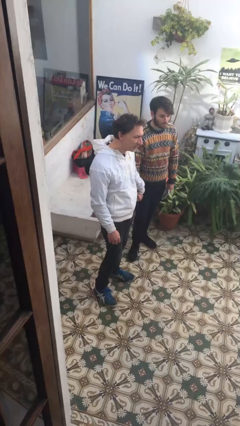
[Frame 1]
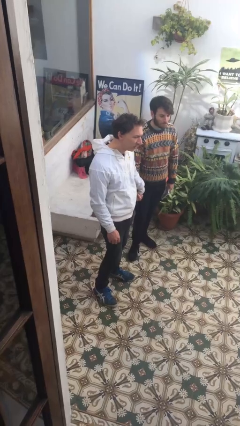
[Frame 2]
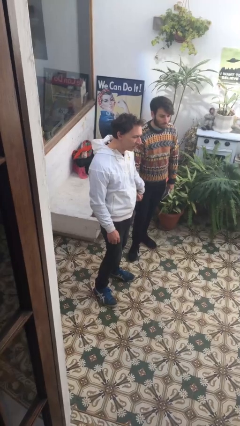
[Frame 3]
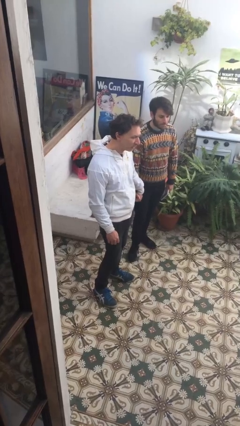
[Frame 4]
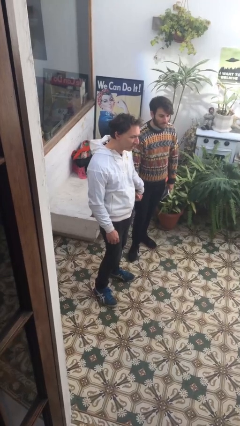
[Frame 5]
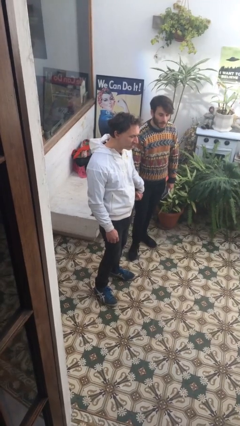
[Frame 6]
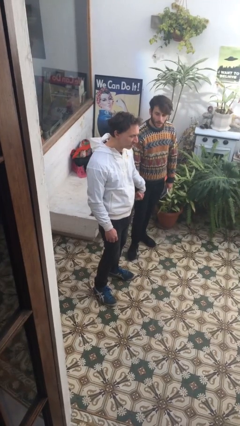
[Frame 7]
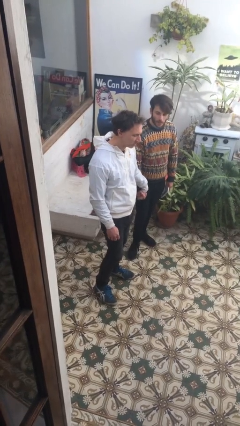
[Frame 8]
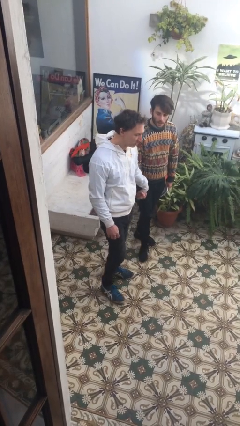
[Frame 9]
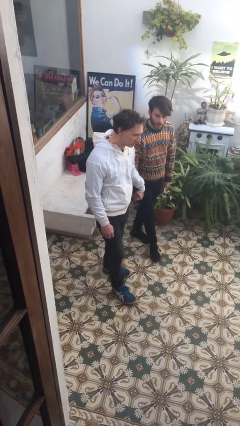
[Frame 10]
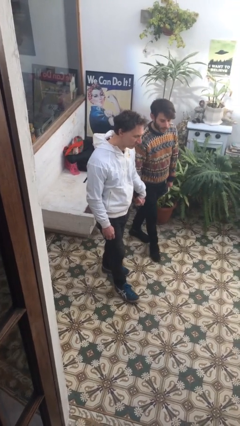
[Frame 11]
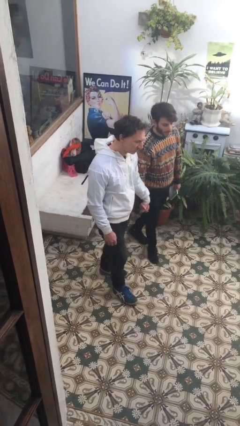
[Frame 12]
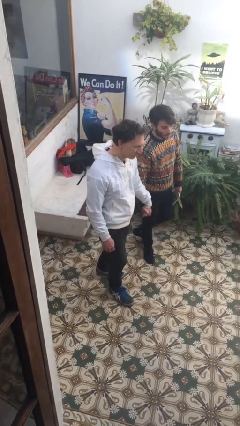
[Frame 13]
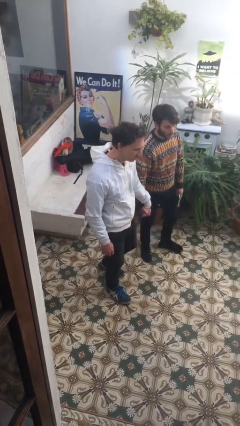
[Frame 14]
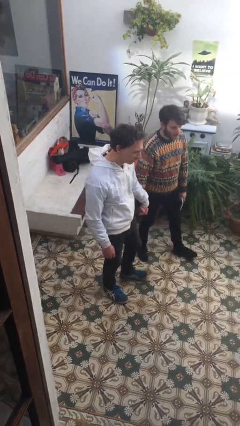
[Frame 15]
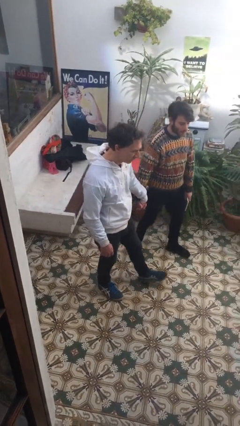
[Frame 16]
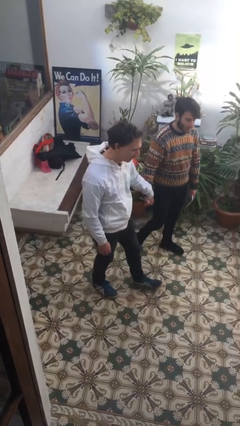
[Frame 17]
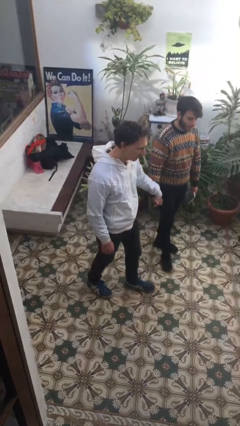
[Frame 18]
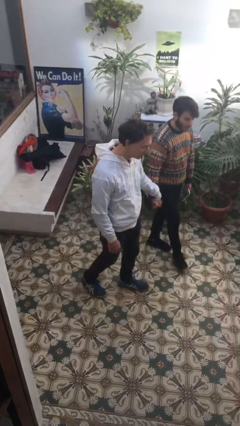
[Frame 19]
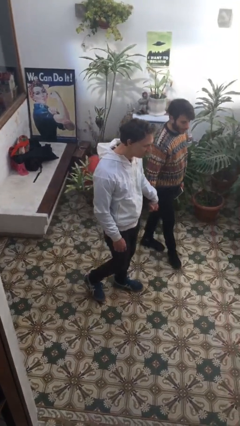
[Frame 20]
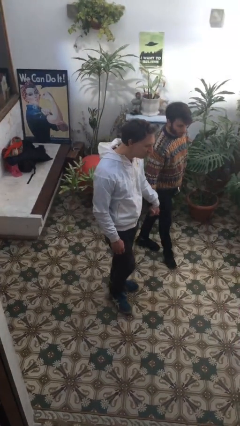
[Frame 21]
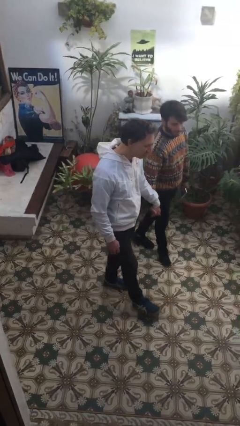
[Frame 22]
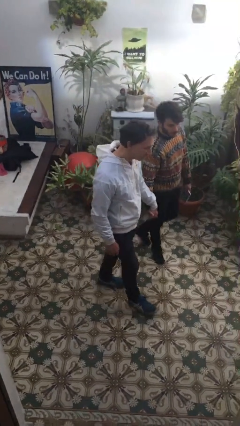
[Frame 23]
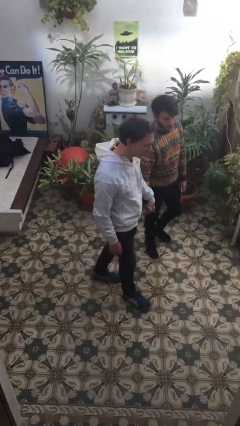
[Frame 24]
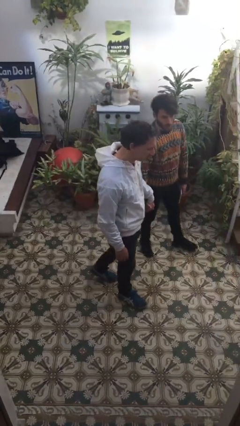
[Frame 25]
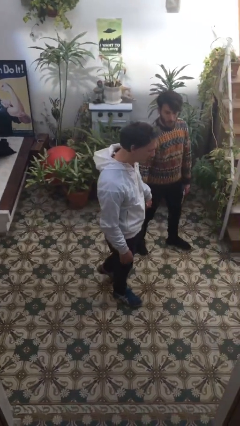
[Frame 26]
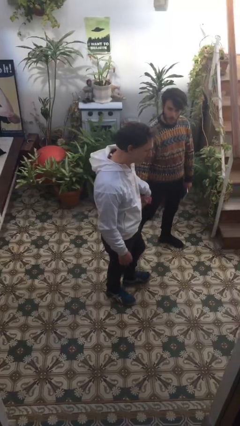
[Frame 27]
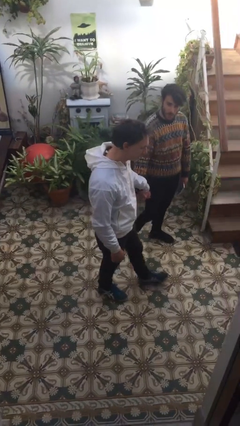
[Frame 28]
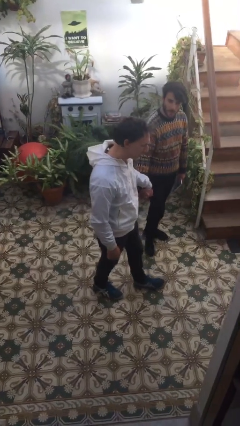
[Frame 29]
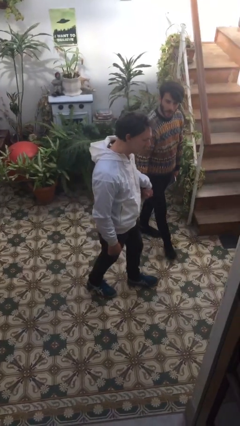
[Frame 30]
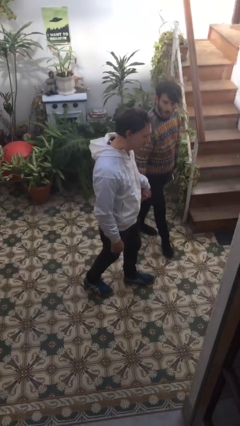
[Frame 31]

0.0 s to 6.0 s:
person holds hand

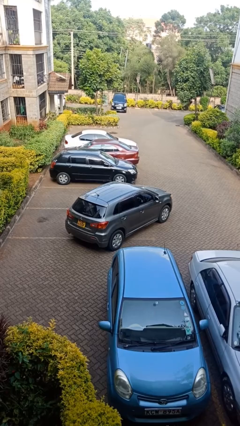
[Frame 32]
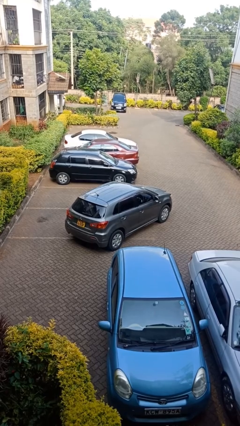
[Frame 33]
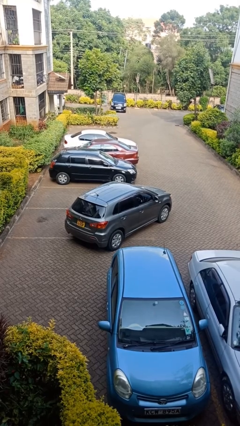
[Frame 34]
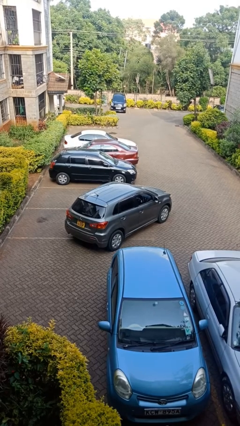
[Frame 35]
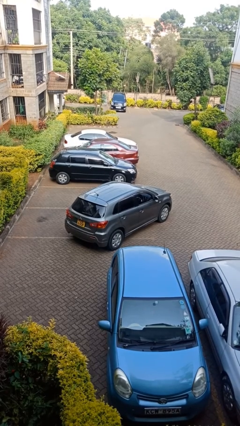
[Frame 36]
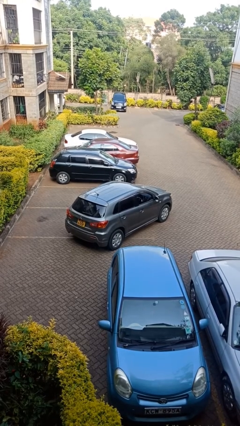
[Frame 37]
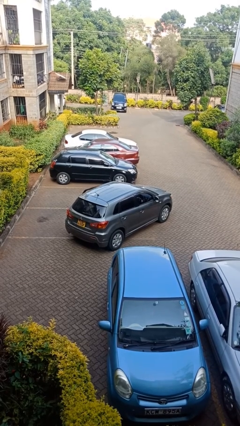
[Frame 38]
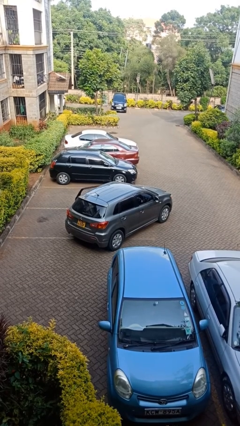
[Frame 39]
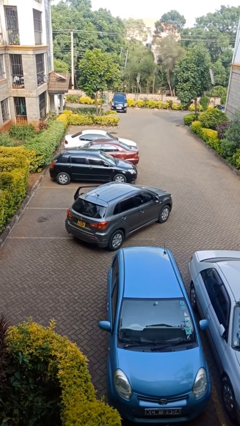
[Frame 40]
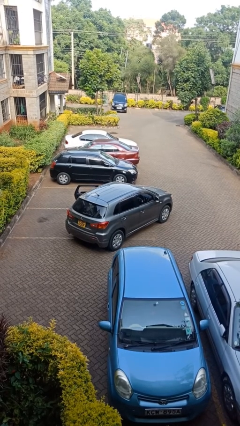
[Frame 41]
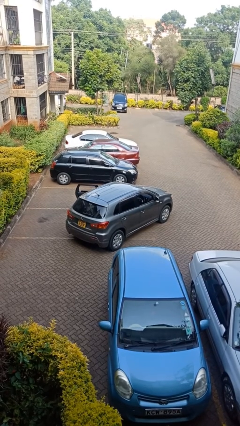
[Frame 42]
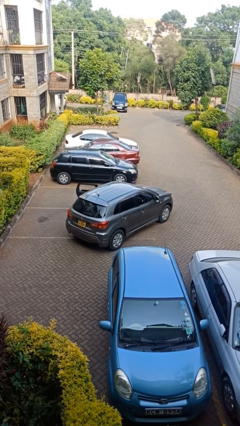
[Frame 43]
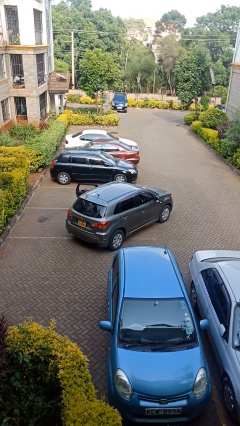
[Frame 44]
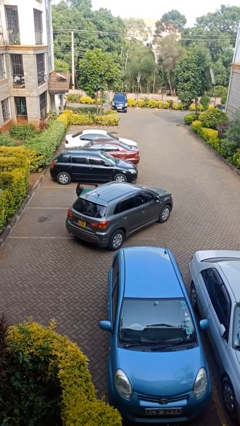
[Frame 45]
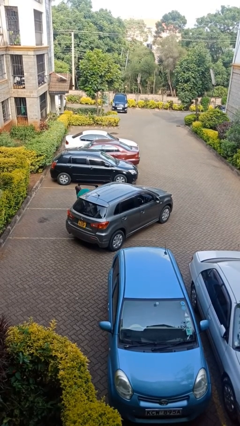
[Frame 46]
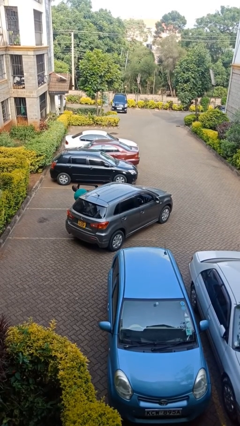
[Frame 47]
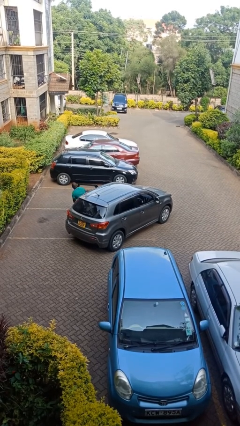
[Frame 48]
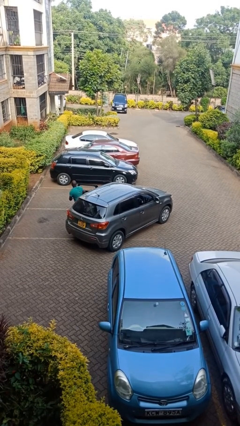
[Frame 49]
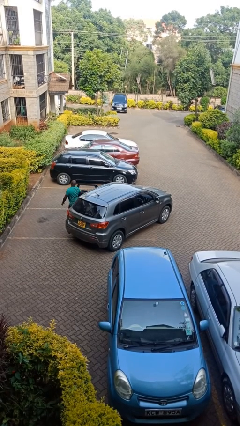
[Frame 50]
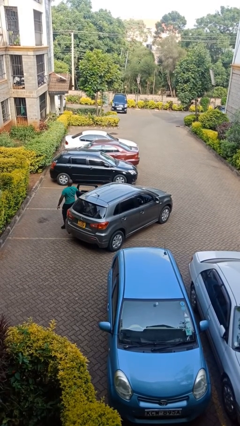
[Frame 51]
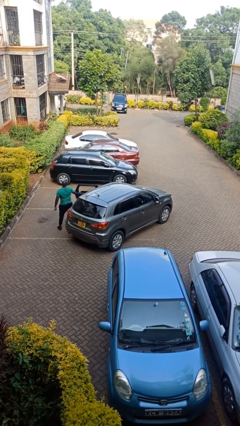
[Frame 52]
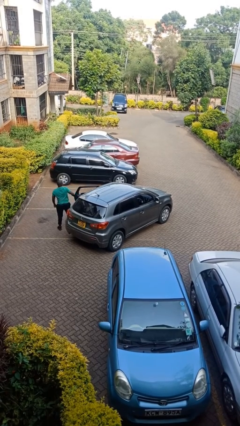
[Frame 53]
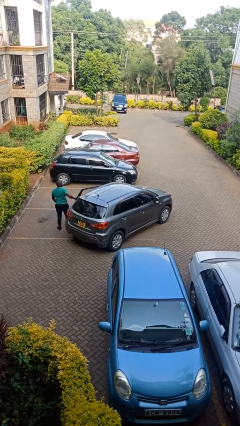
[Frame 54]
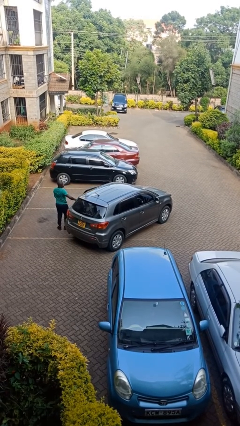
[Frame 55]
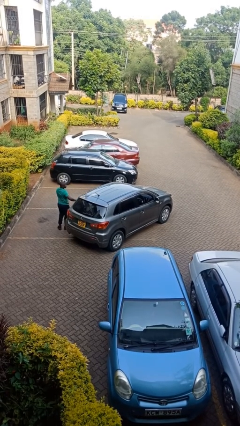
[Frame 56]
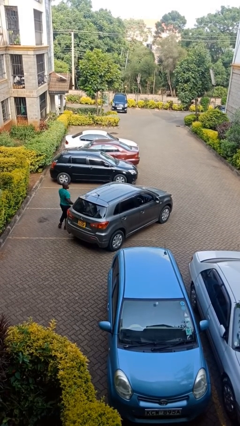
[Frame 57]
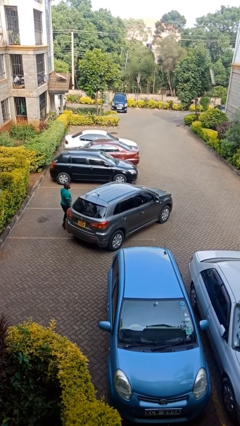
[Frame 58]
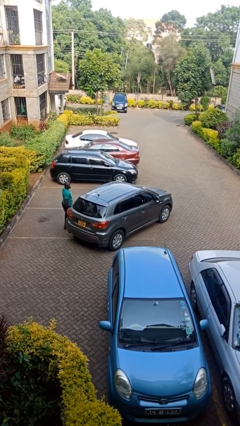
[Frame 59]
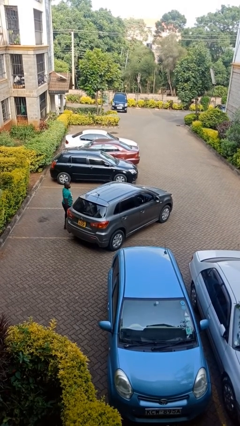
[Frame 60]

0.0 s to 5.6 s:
car drops off person

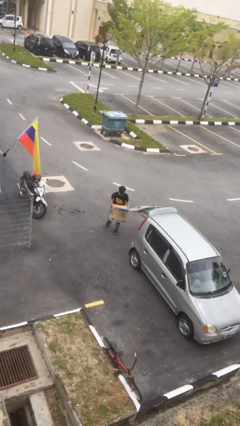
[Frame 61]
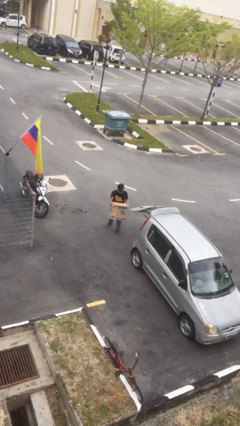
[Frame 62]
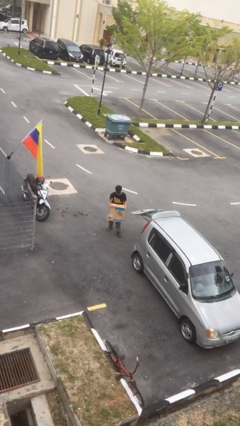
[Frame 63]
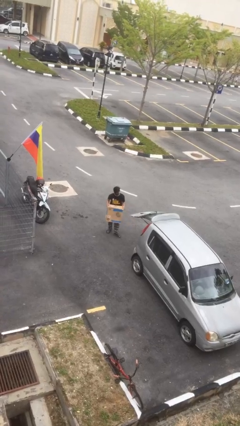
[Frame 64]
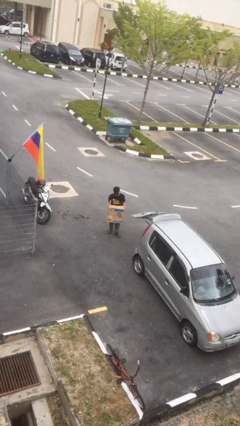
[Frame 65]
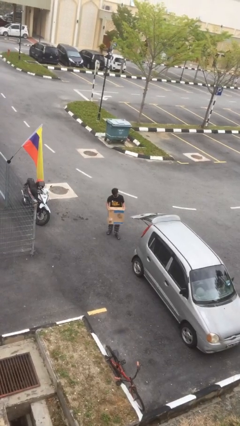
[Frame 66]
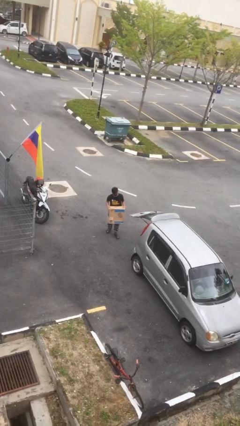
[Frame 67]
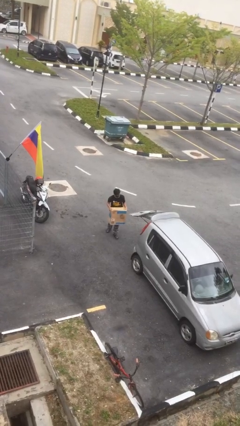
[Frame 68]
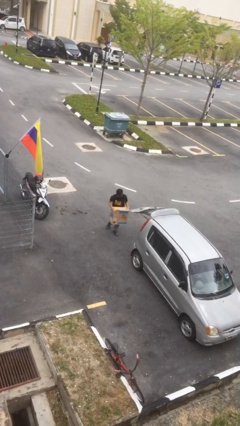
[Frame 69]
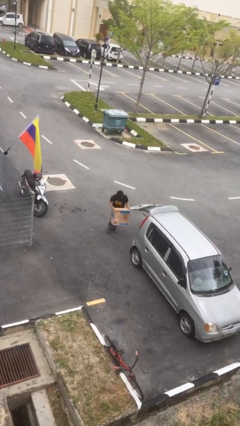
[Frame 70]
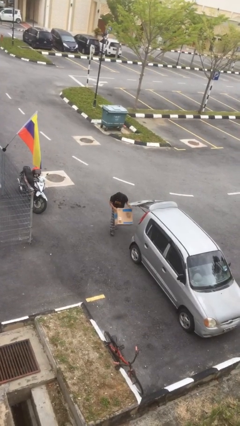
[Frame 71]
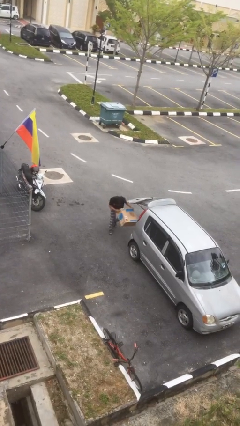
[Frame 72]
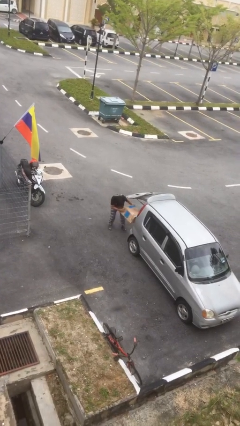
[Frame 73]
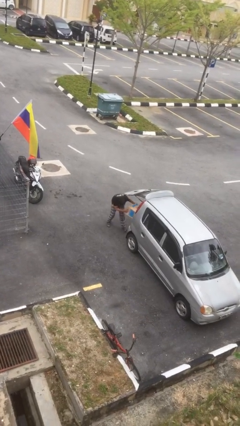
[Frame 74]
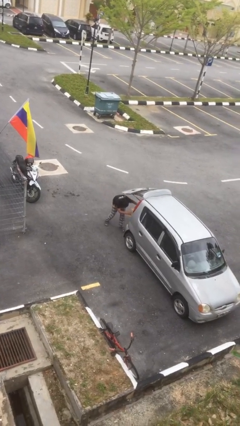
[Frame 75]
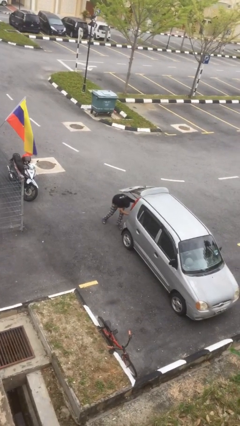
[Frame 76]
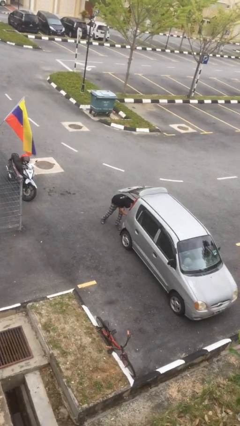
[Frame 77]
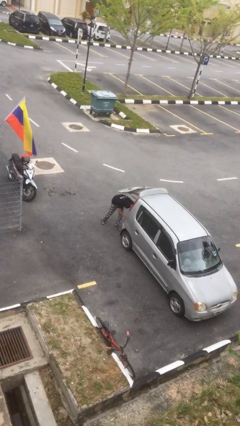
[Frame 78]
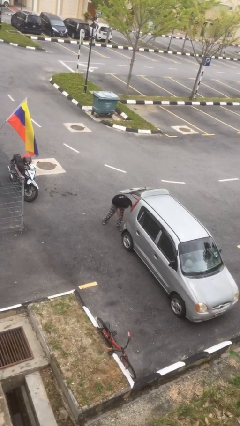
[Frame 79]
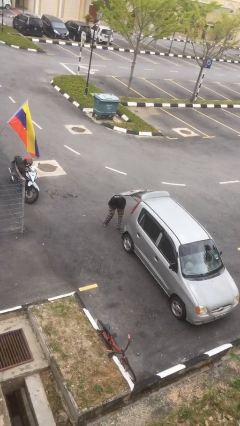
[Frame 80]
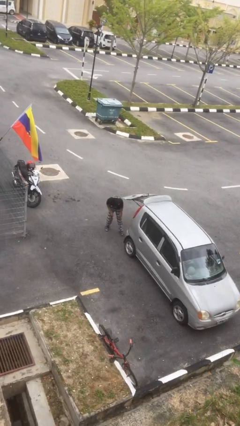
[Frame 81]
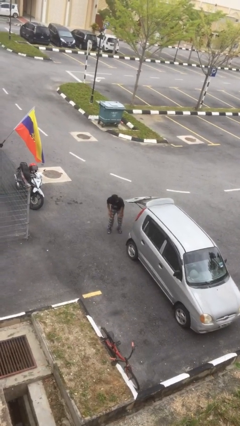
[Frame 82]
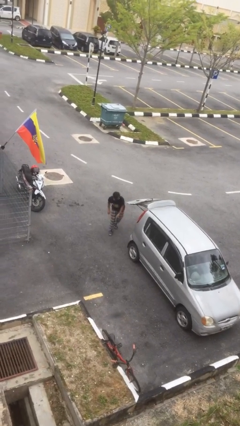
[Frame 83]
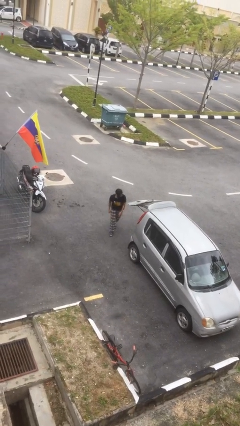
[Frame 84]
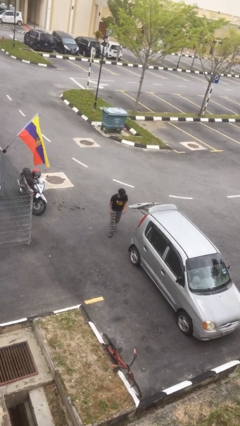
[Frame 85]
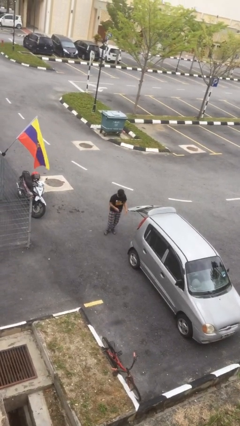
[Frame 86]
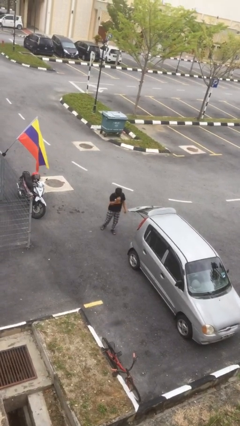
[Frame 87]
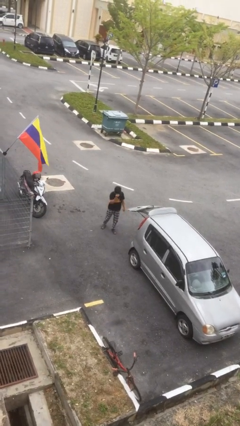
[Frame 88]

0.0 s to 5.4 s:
person loads car

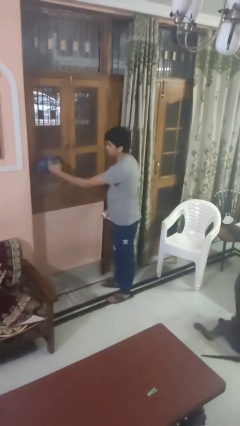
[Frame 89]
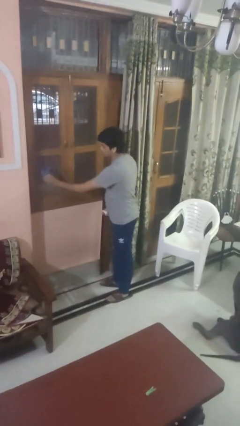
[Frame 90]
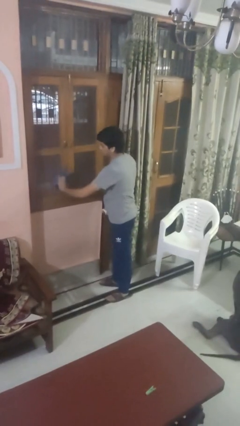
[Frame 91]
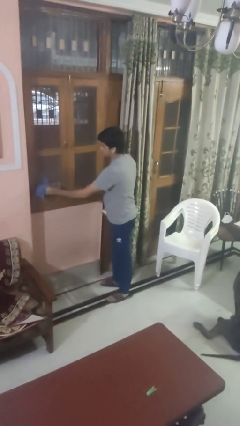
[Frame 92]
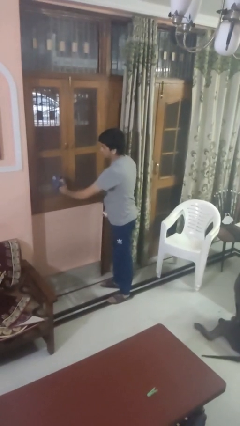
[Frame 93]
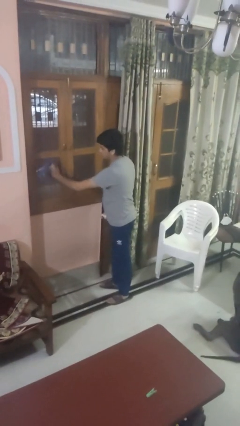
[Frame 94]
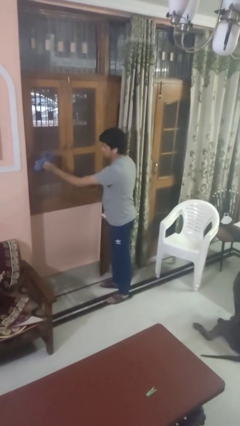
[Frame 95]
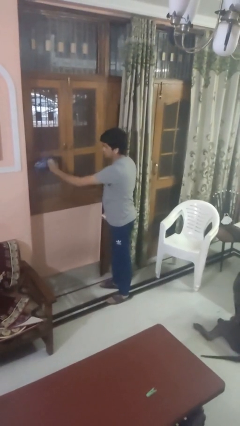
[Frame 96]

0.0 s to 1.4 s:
person washes window
